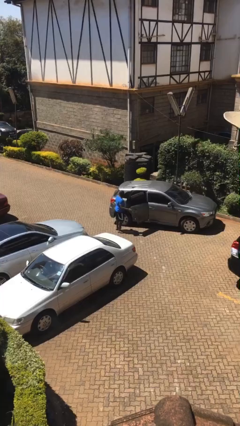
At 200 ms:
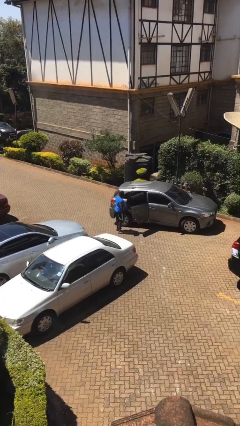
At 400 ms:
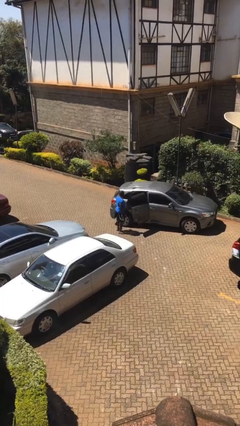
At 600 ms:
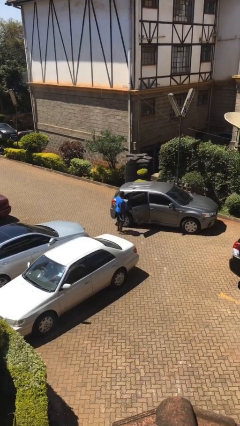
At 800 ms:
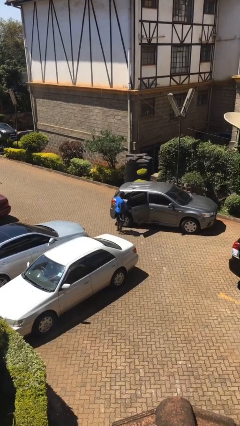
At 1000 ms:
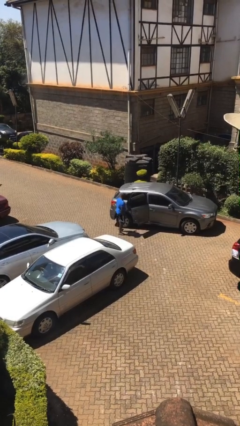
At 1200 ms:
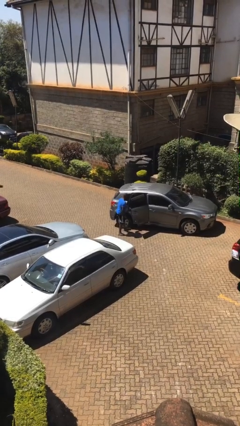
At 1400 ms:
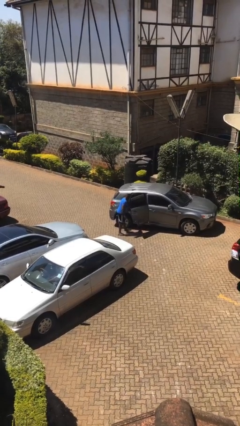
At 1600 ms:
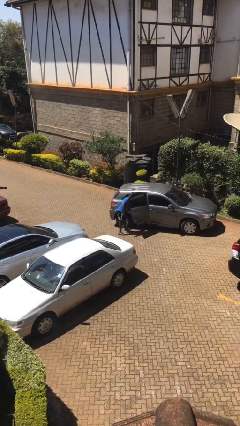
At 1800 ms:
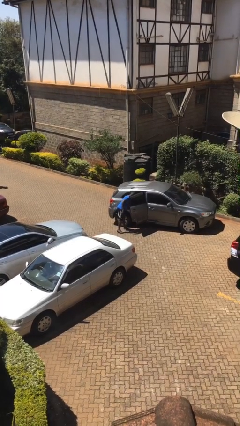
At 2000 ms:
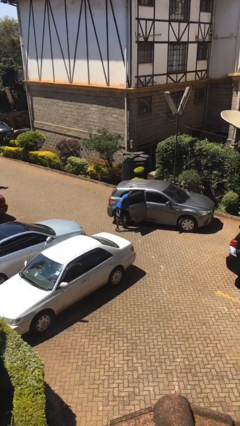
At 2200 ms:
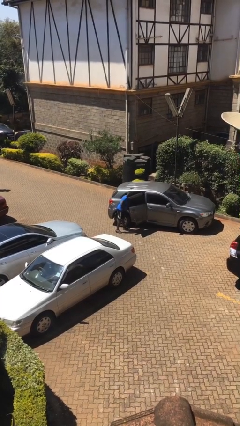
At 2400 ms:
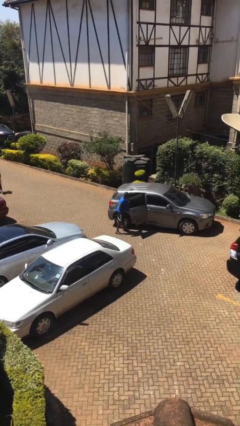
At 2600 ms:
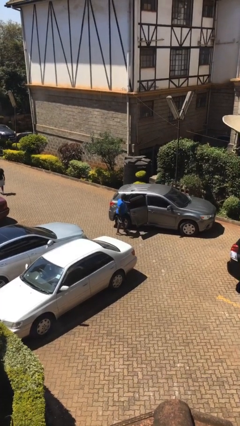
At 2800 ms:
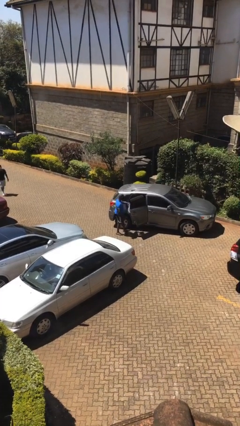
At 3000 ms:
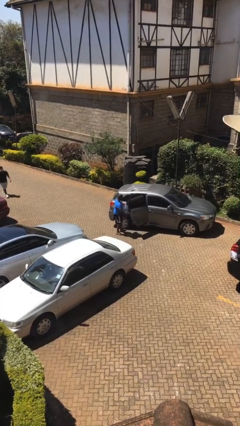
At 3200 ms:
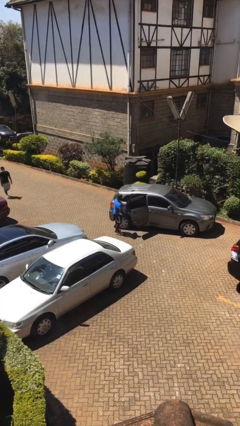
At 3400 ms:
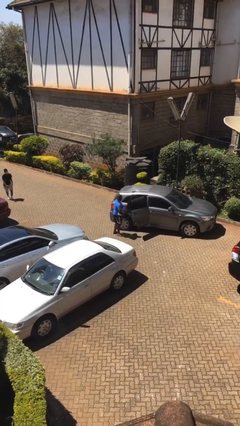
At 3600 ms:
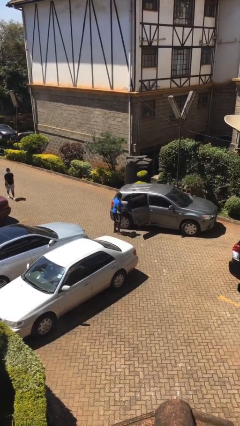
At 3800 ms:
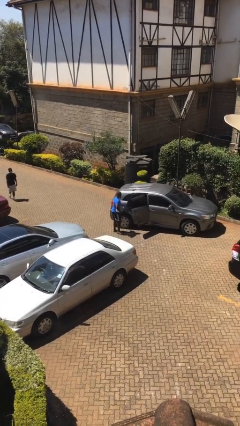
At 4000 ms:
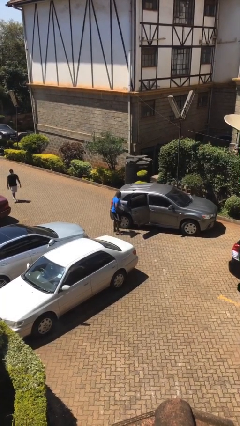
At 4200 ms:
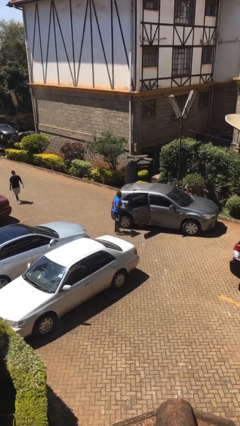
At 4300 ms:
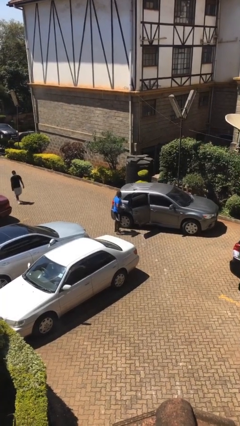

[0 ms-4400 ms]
person unloads car

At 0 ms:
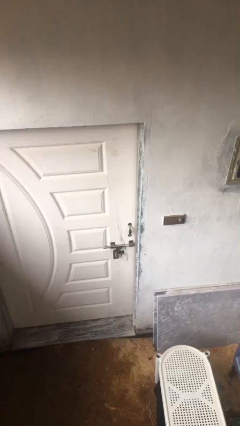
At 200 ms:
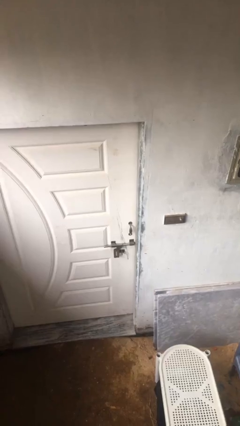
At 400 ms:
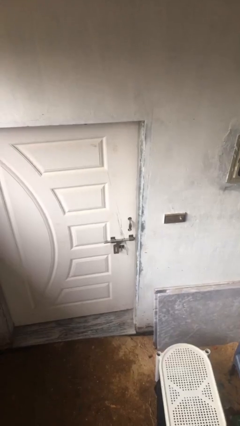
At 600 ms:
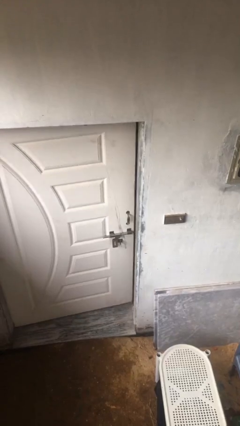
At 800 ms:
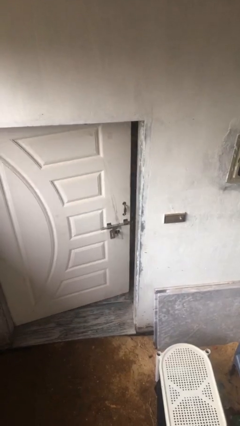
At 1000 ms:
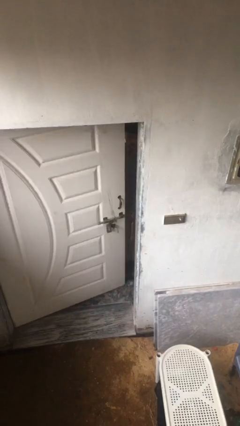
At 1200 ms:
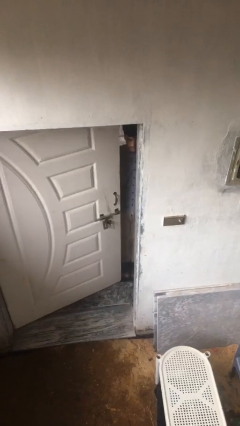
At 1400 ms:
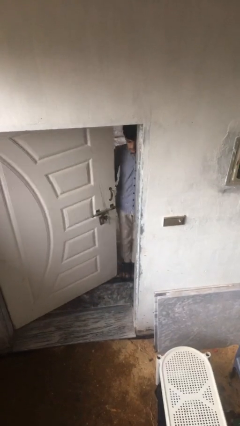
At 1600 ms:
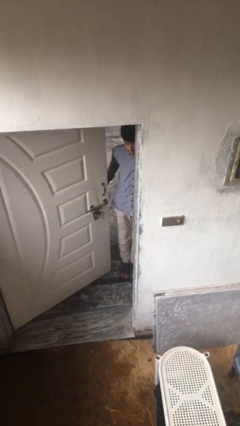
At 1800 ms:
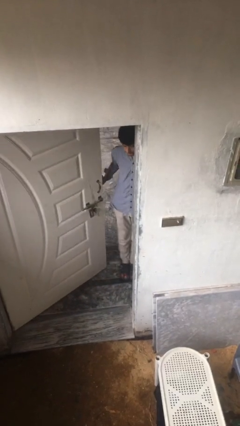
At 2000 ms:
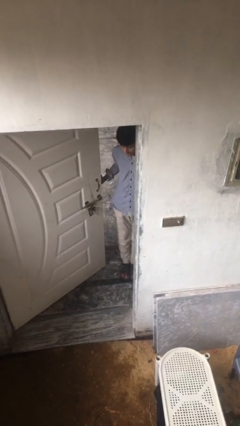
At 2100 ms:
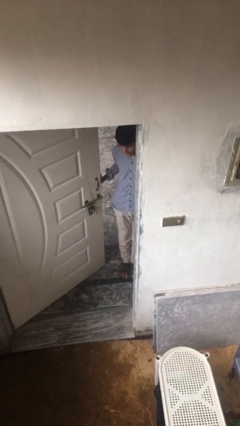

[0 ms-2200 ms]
person opens facility door

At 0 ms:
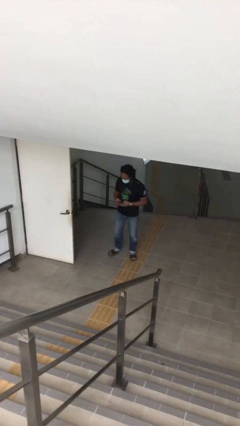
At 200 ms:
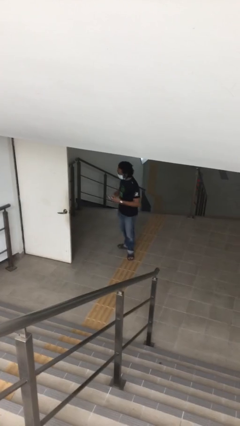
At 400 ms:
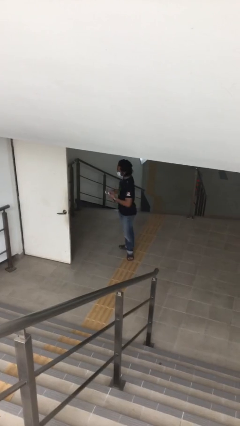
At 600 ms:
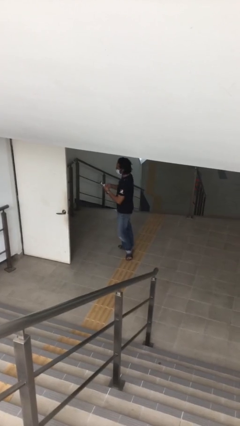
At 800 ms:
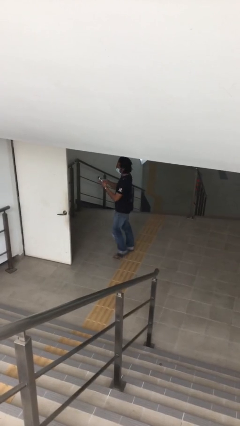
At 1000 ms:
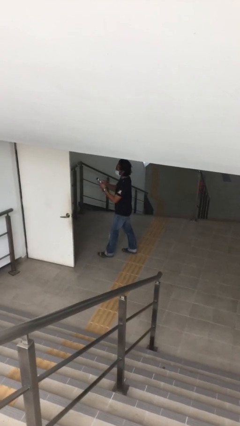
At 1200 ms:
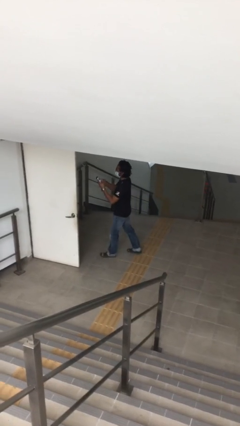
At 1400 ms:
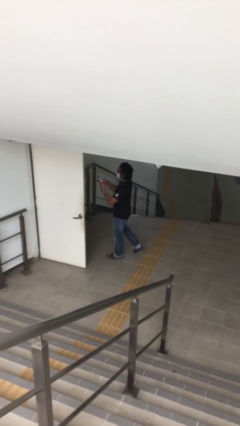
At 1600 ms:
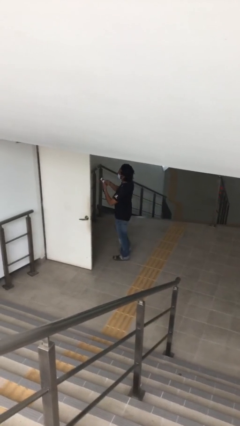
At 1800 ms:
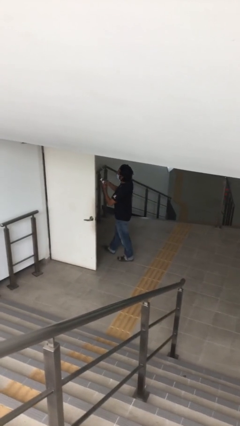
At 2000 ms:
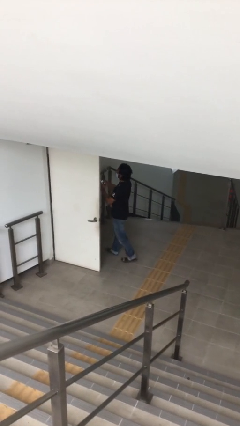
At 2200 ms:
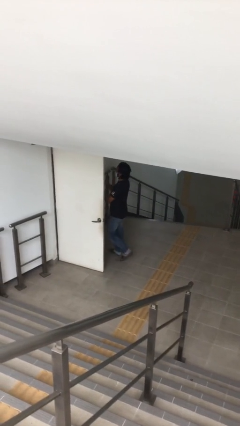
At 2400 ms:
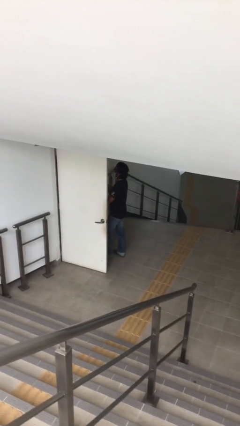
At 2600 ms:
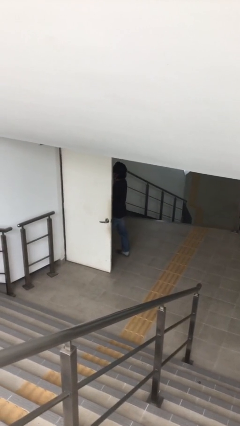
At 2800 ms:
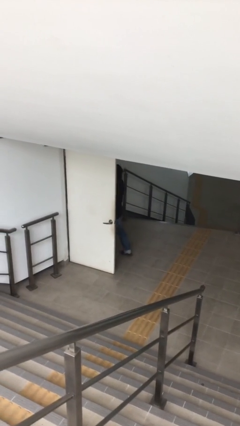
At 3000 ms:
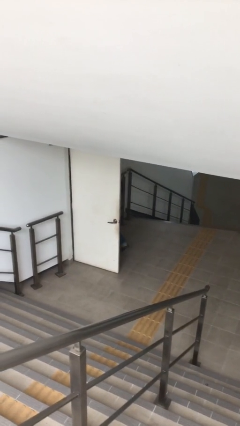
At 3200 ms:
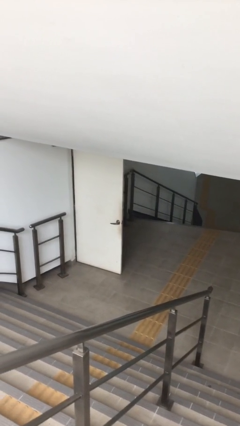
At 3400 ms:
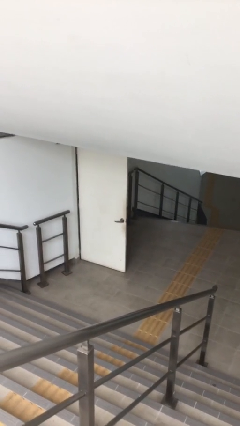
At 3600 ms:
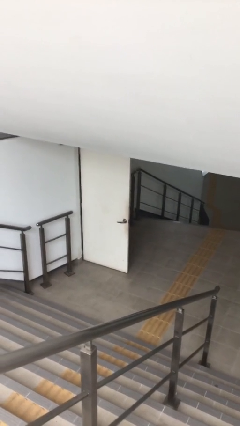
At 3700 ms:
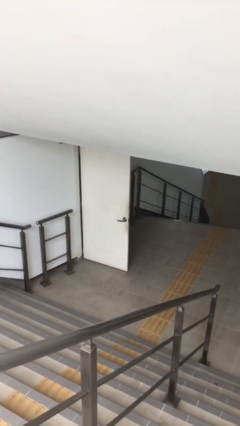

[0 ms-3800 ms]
person exits scene through structure

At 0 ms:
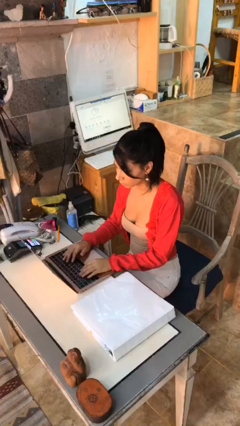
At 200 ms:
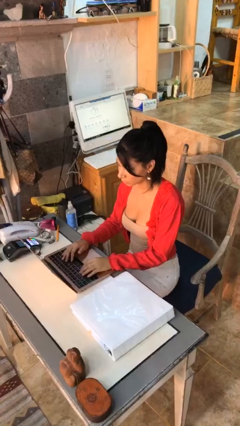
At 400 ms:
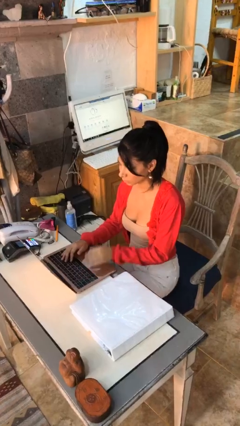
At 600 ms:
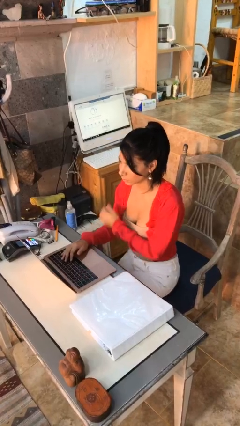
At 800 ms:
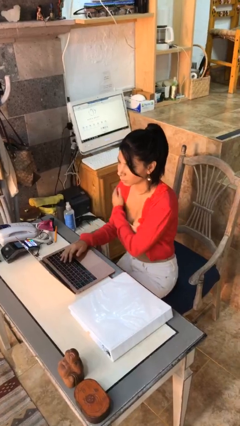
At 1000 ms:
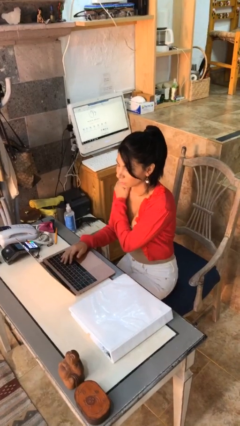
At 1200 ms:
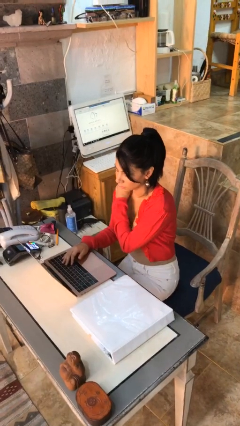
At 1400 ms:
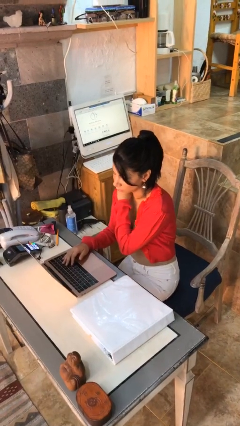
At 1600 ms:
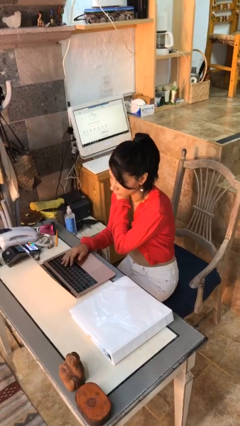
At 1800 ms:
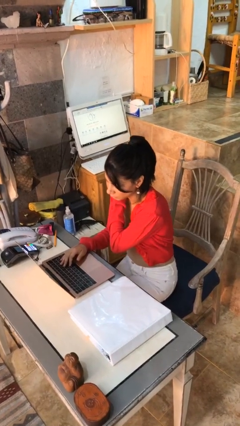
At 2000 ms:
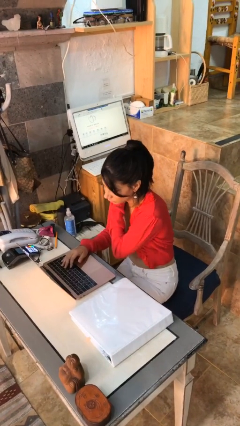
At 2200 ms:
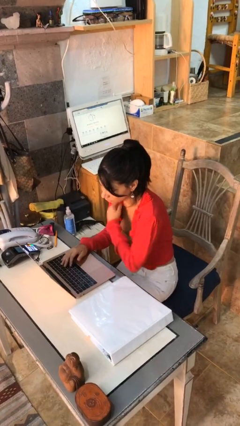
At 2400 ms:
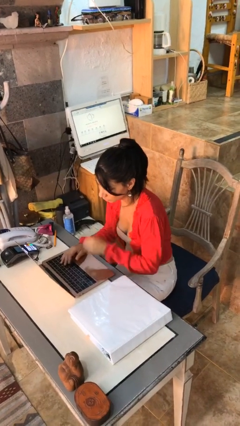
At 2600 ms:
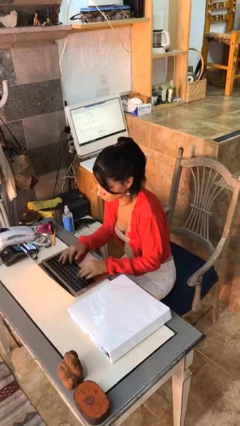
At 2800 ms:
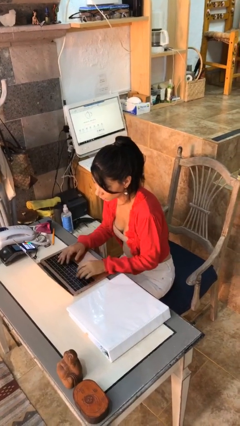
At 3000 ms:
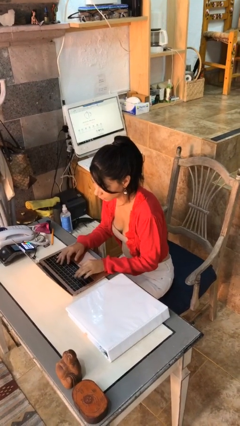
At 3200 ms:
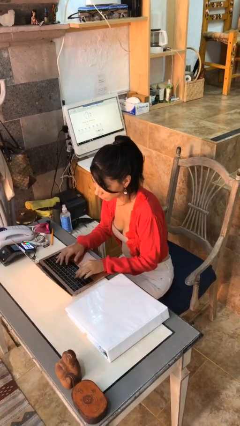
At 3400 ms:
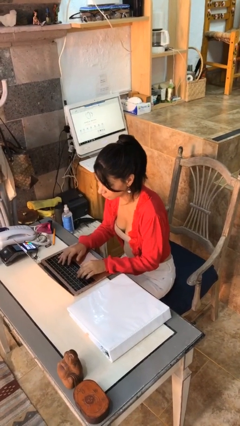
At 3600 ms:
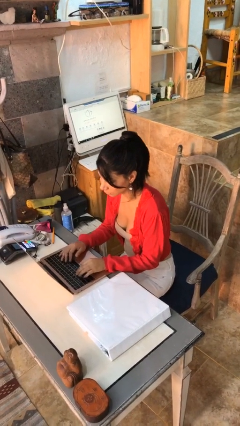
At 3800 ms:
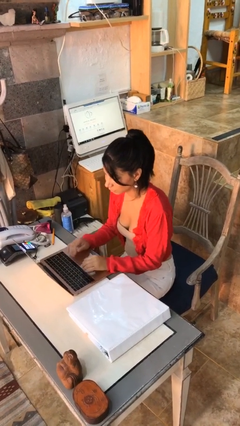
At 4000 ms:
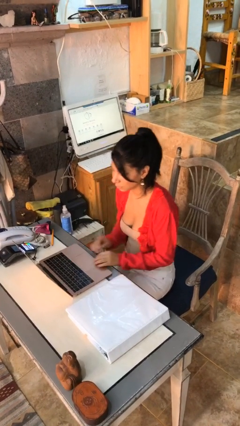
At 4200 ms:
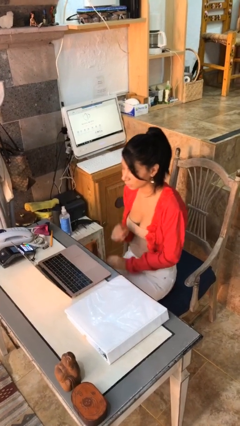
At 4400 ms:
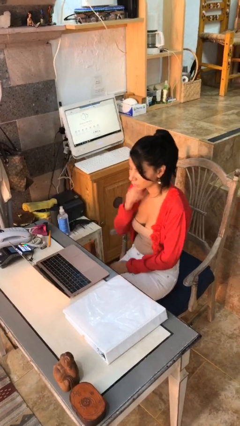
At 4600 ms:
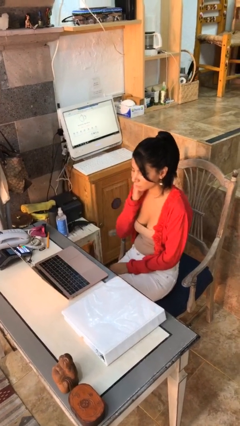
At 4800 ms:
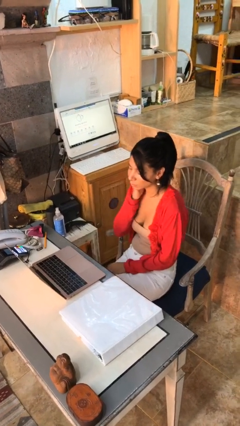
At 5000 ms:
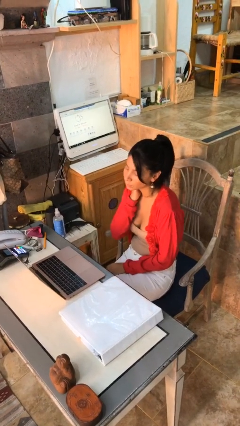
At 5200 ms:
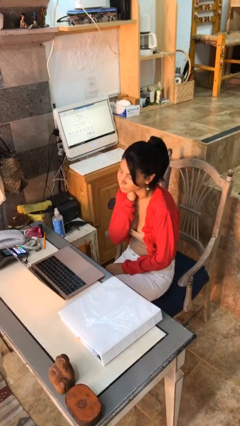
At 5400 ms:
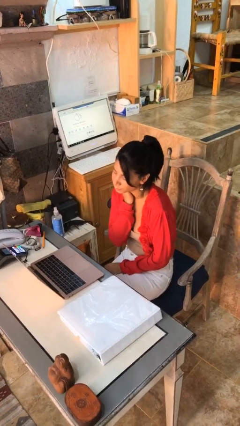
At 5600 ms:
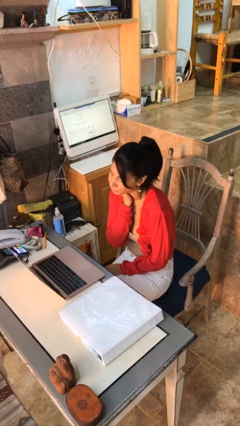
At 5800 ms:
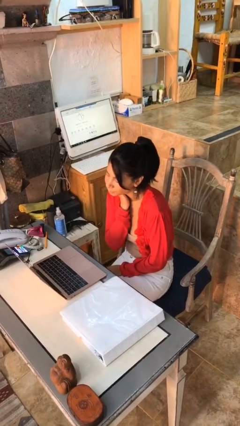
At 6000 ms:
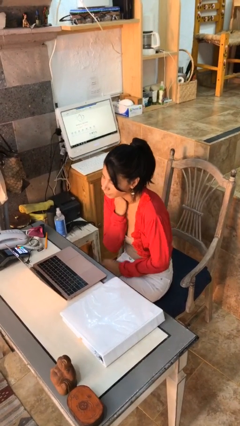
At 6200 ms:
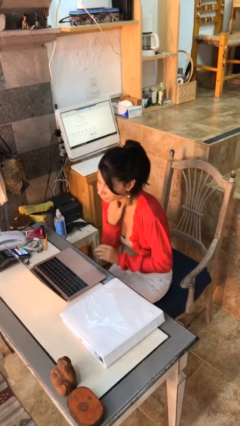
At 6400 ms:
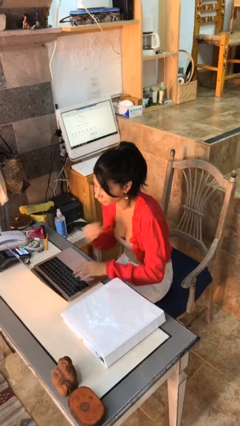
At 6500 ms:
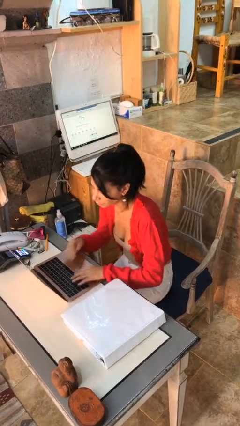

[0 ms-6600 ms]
person interacts with laptop

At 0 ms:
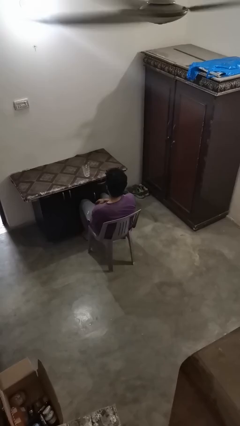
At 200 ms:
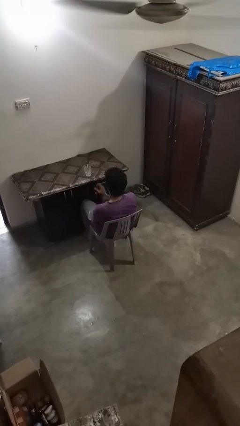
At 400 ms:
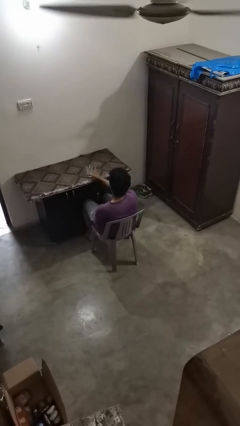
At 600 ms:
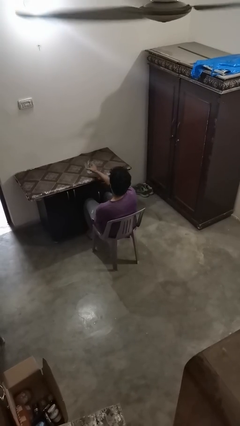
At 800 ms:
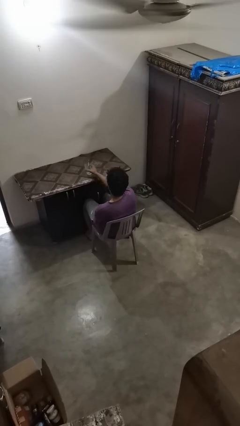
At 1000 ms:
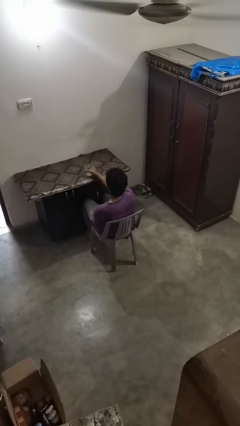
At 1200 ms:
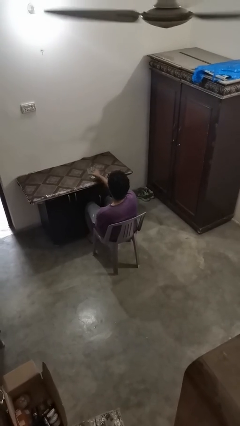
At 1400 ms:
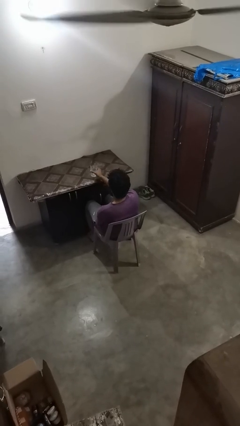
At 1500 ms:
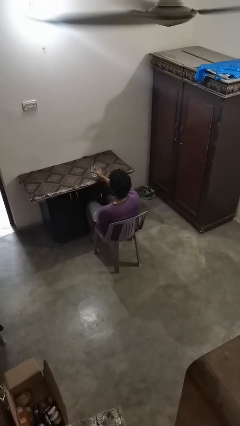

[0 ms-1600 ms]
person knocks over glass